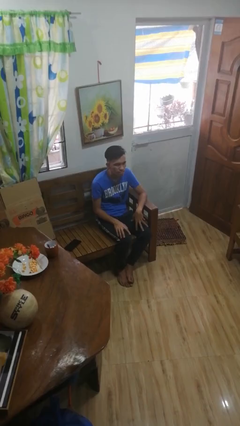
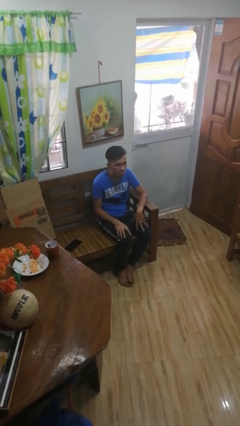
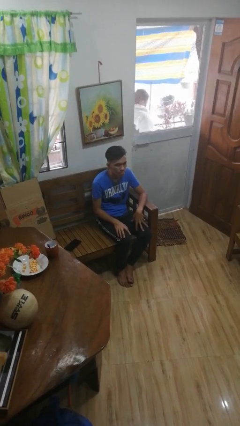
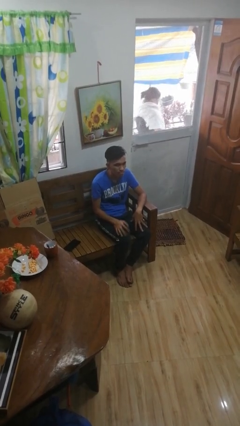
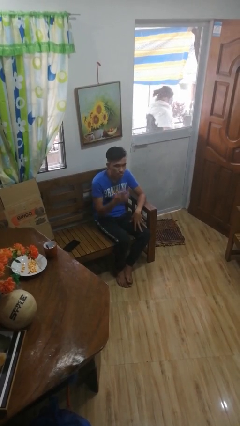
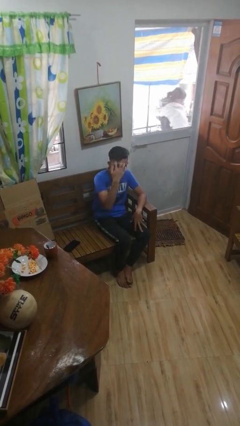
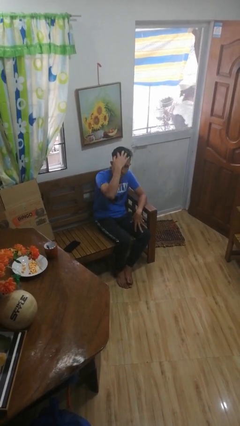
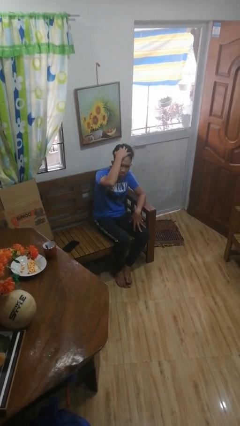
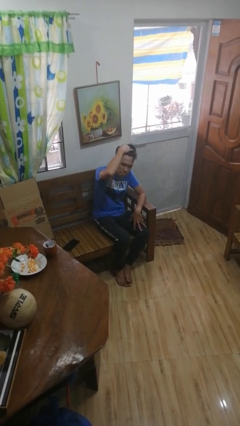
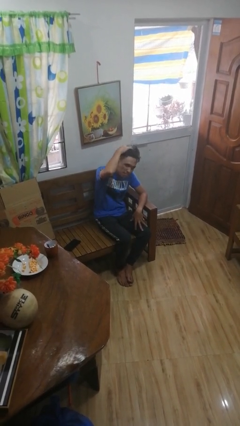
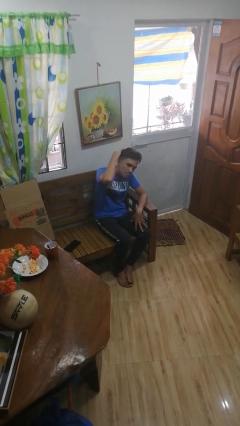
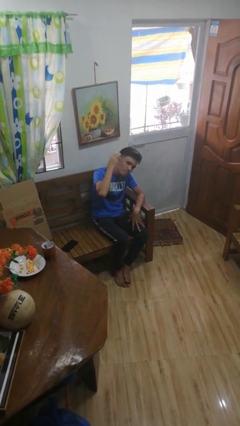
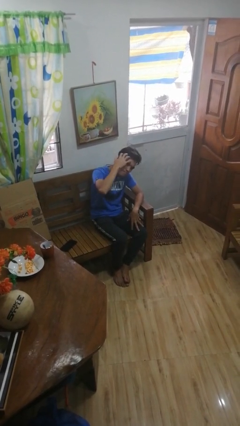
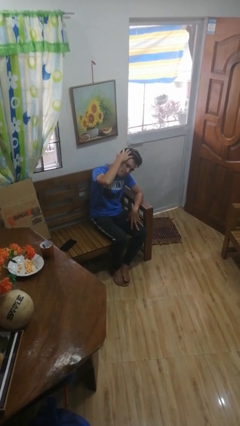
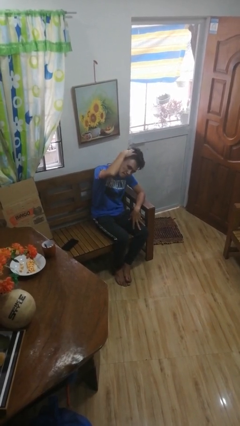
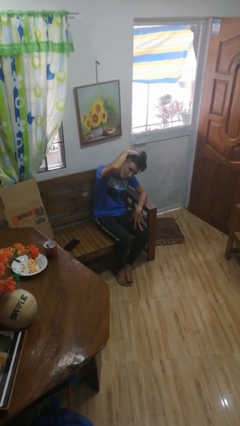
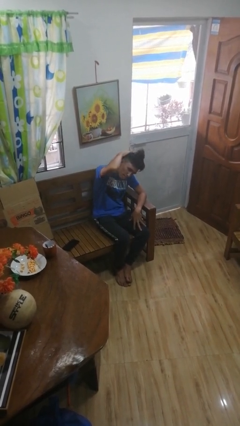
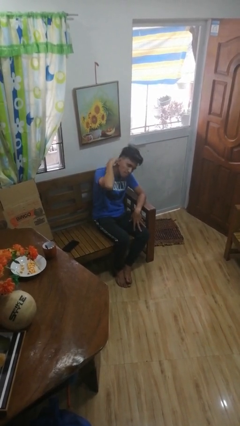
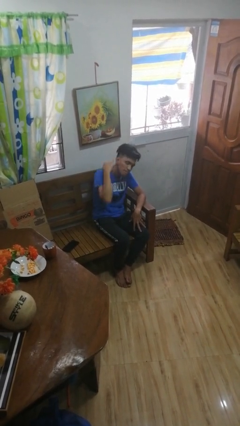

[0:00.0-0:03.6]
person strokes hair

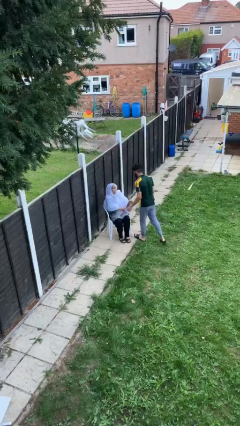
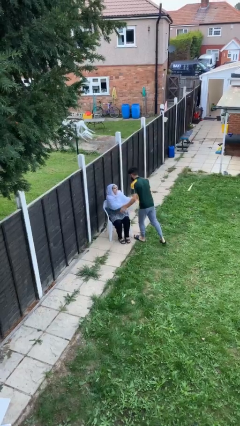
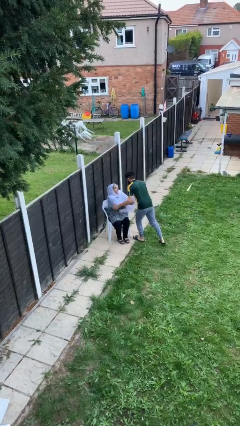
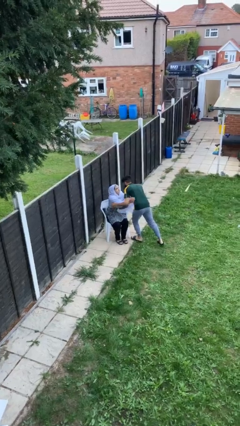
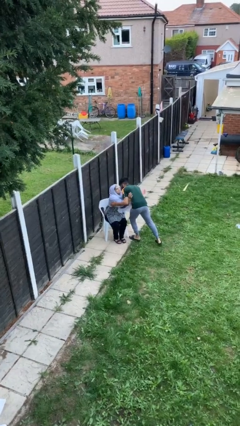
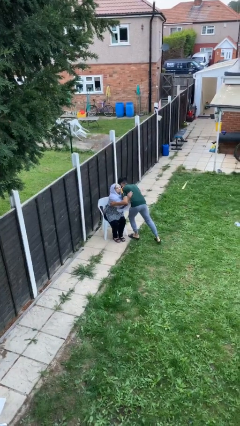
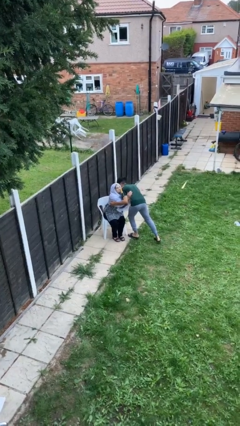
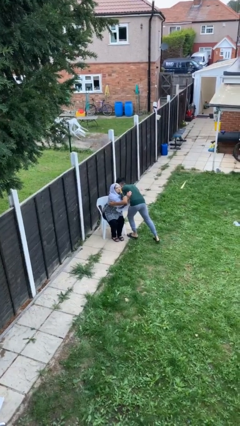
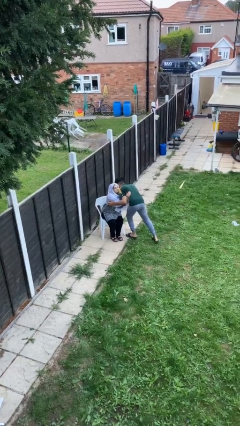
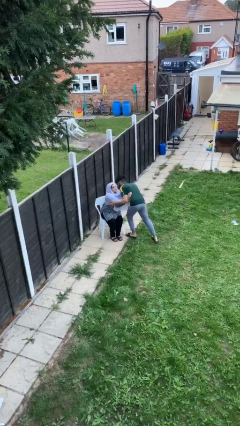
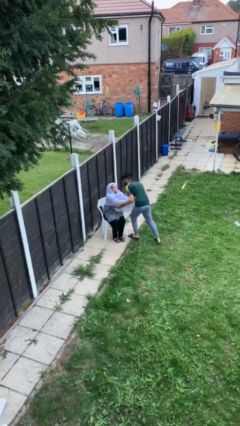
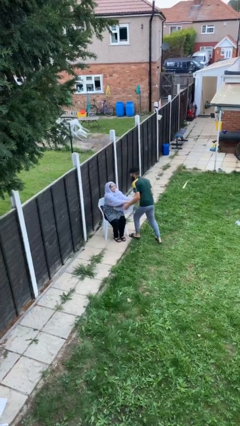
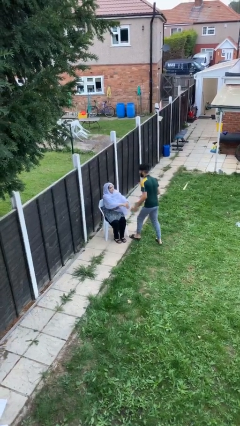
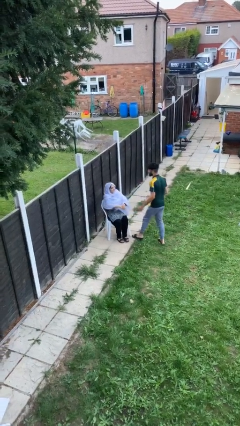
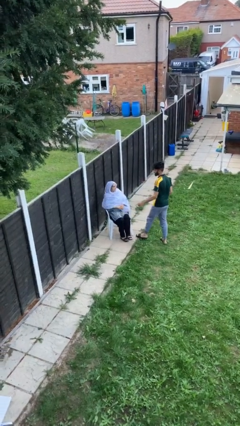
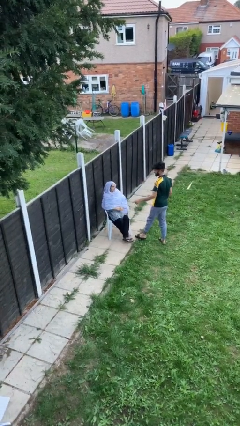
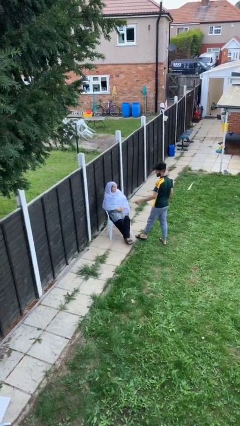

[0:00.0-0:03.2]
person embraces person

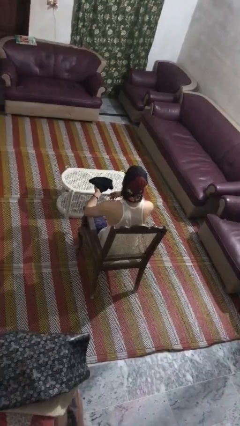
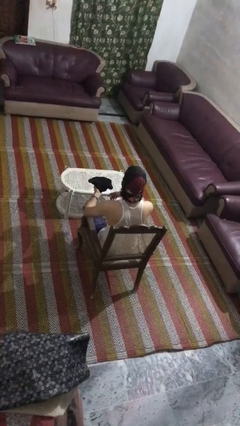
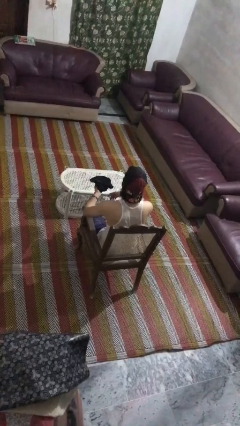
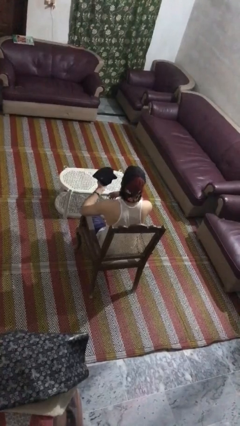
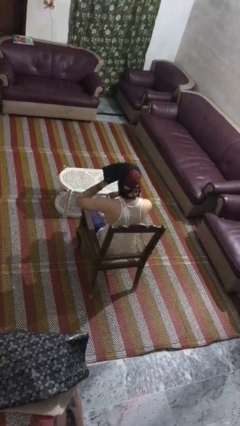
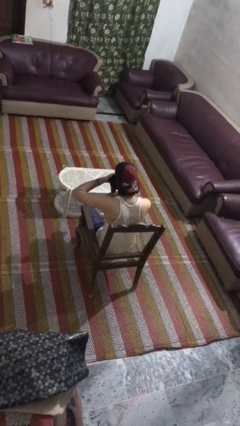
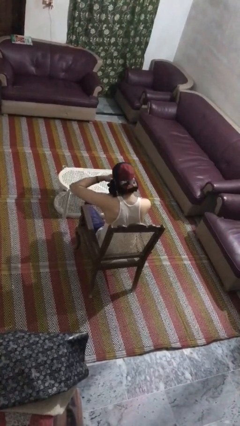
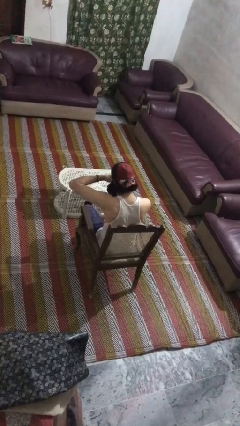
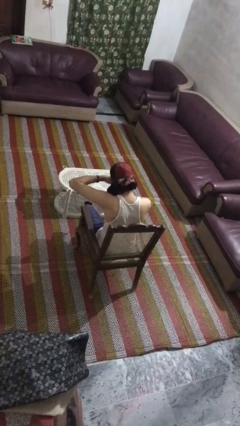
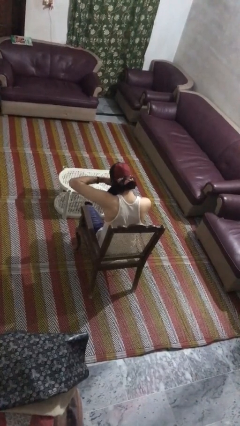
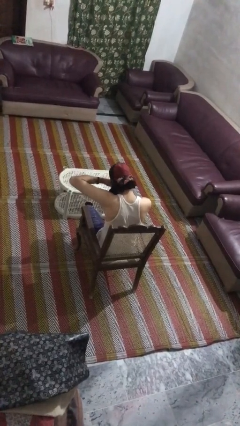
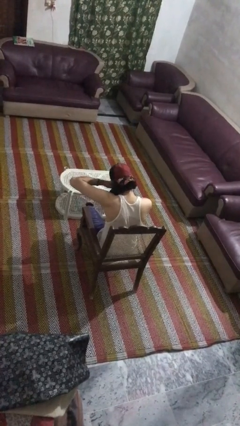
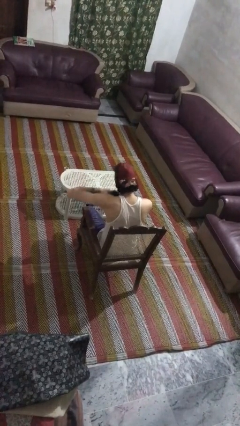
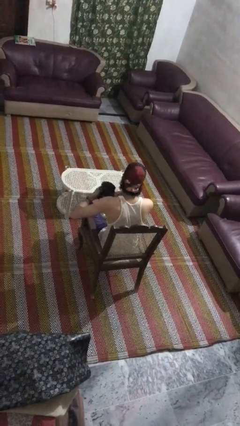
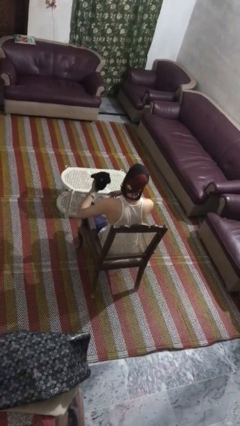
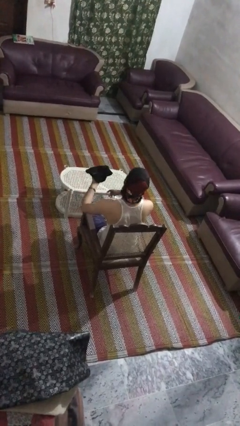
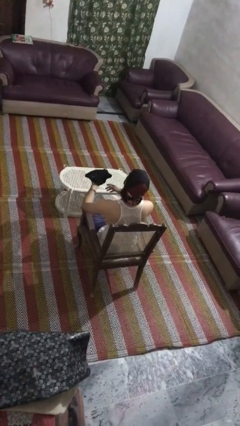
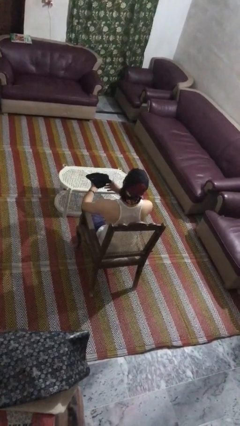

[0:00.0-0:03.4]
person blows nose

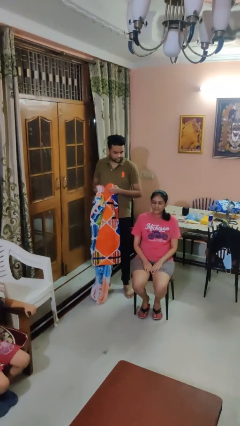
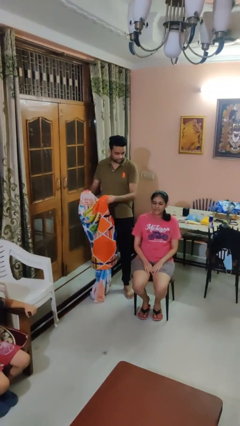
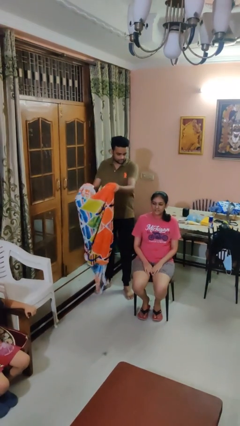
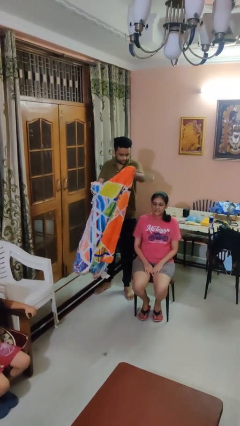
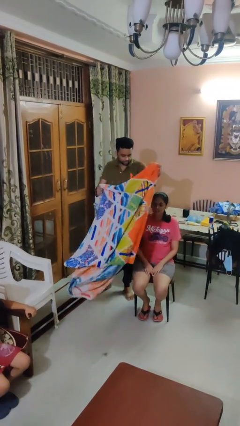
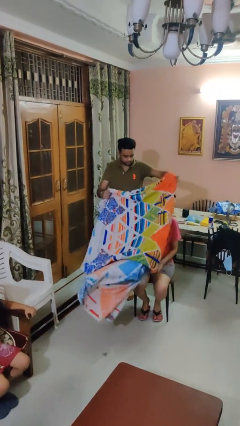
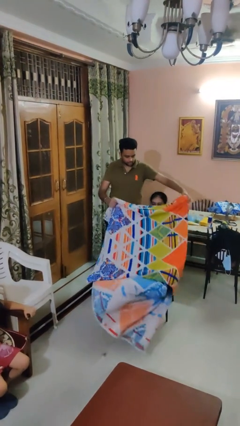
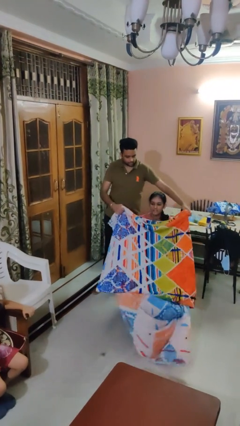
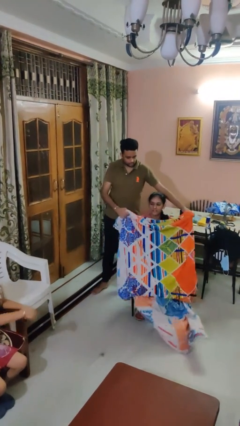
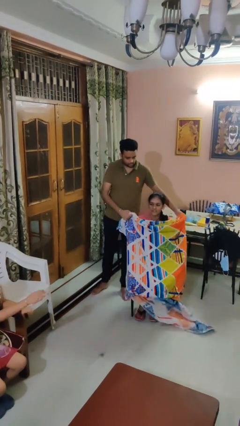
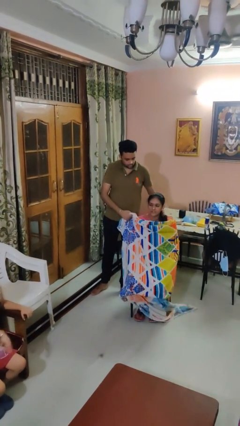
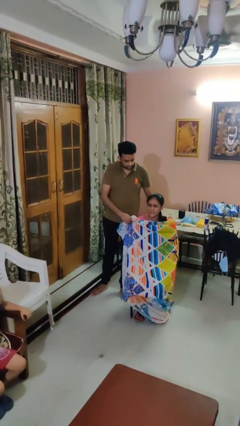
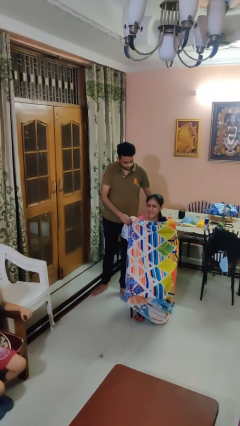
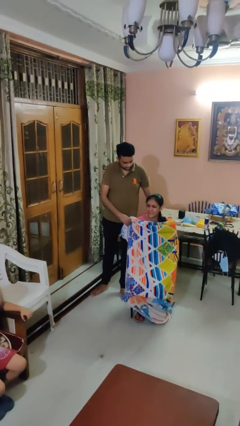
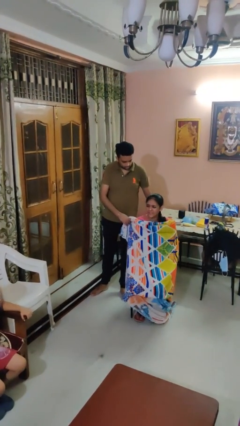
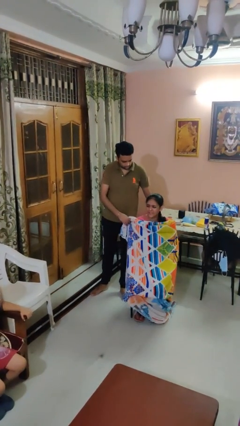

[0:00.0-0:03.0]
person covers friend with blanket

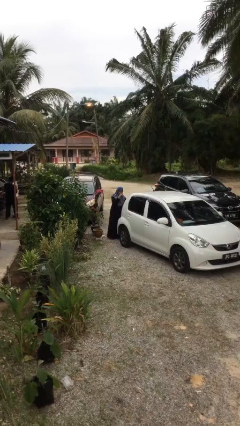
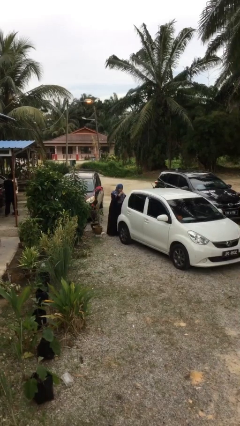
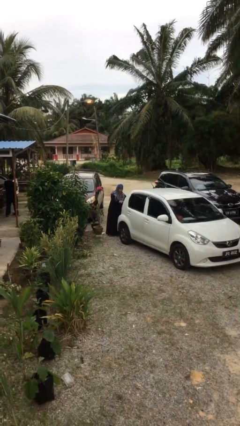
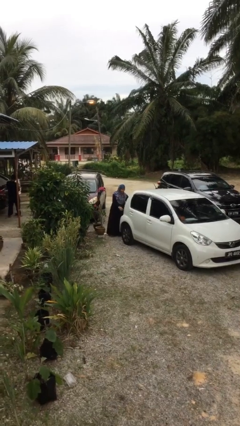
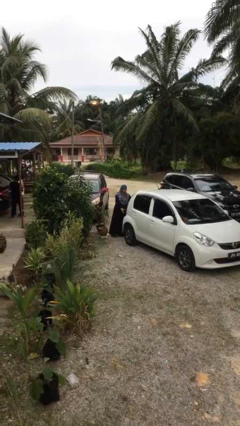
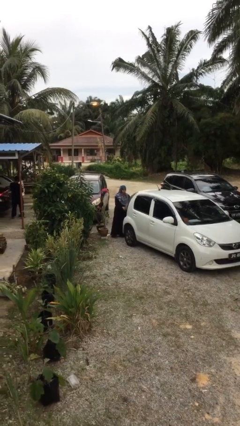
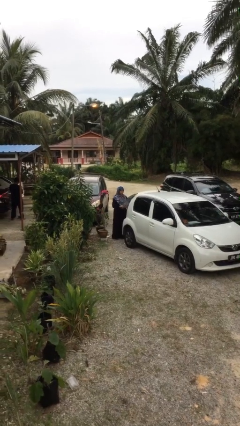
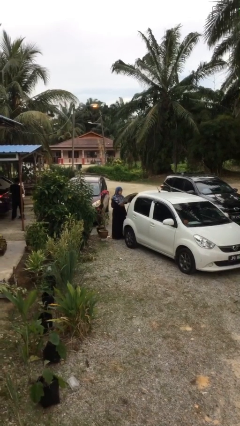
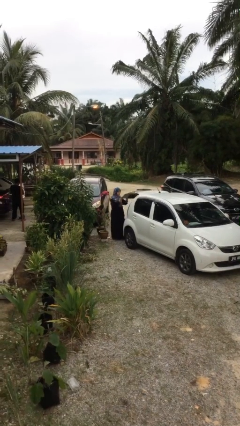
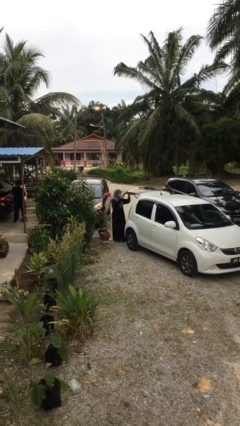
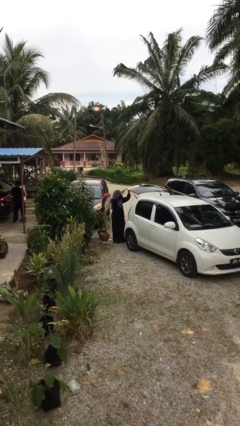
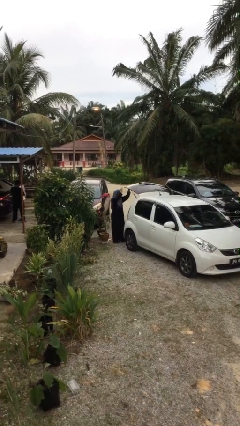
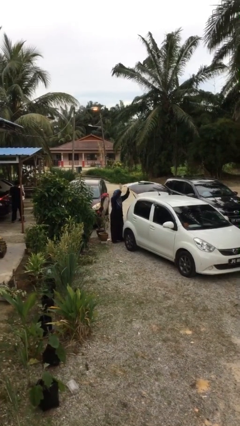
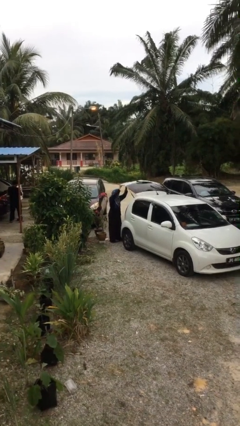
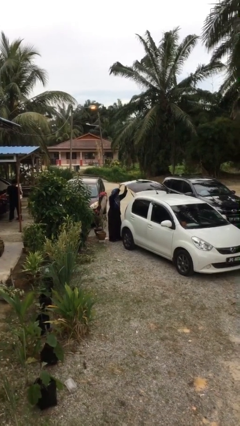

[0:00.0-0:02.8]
person opens car trunk

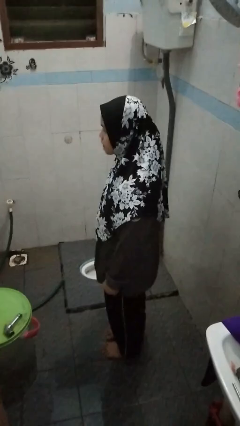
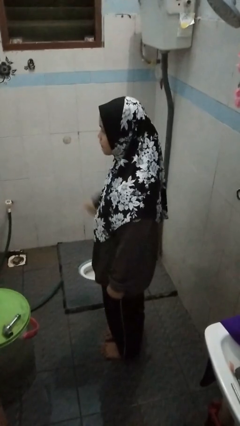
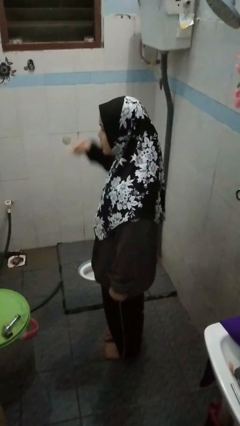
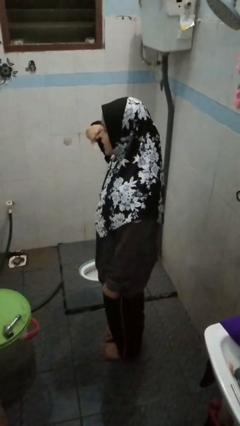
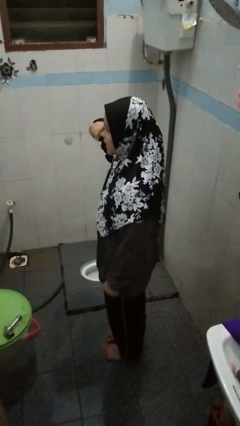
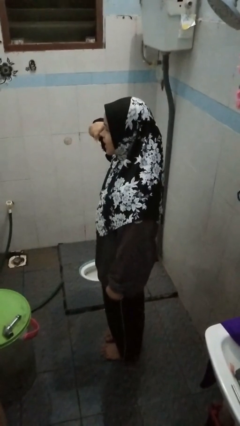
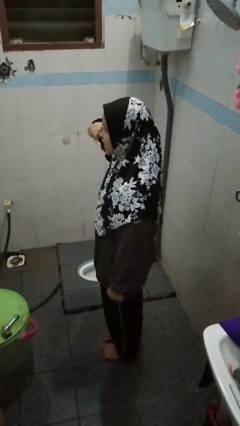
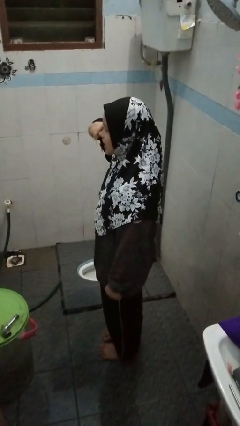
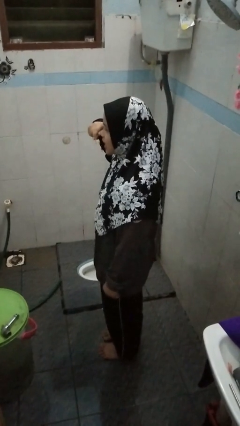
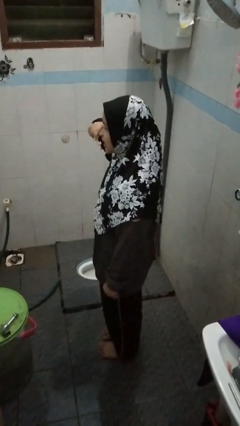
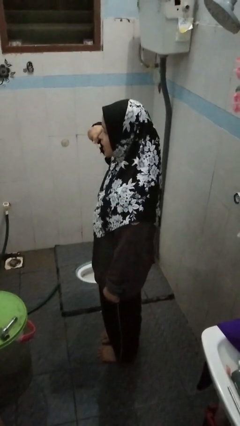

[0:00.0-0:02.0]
person brushes teeth
